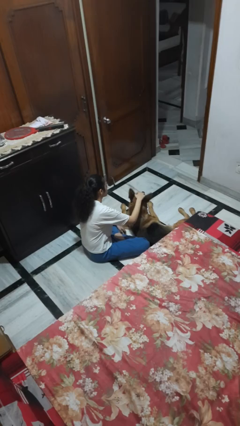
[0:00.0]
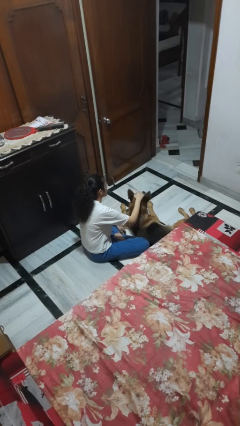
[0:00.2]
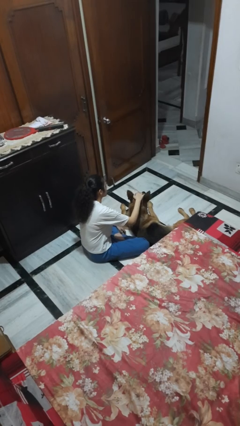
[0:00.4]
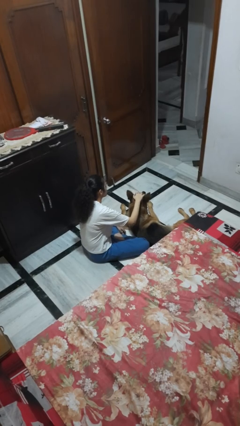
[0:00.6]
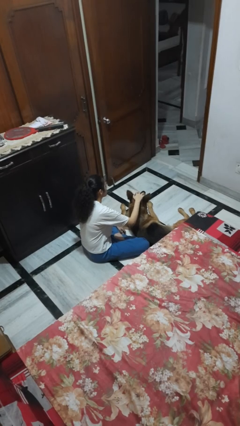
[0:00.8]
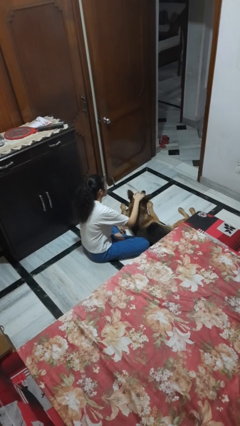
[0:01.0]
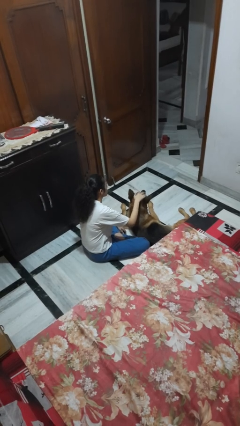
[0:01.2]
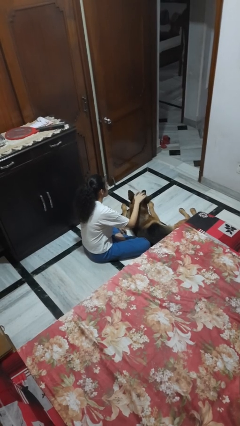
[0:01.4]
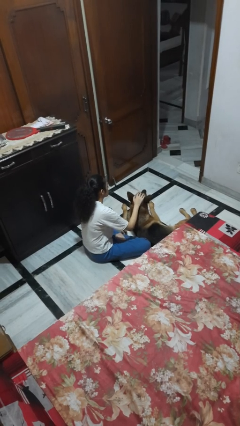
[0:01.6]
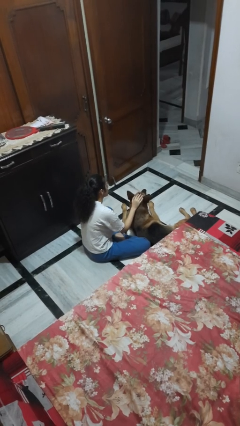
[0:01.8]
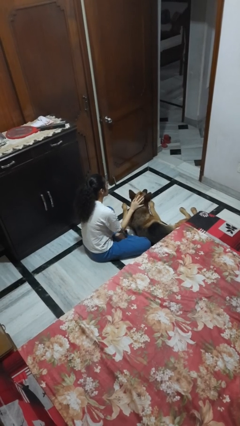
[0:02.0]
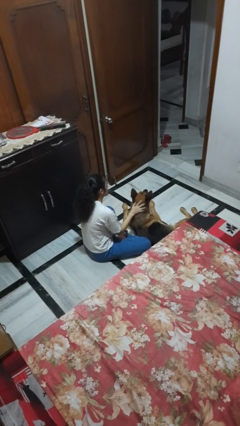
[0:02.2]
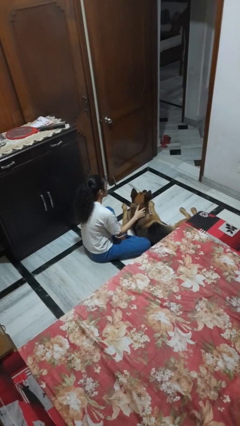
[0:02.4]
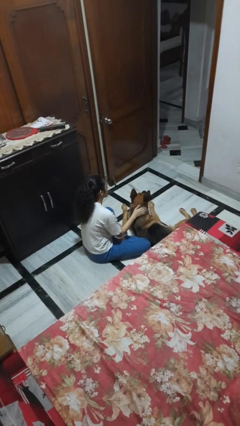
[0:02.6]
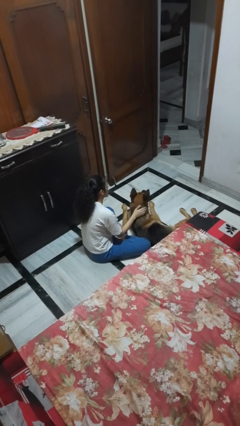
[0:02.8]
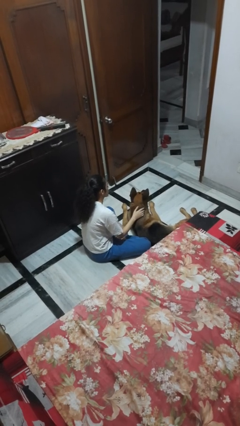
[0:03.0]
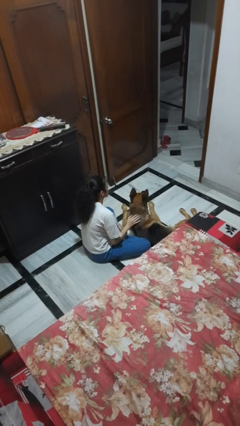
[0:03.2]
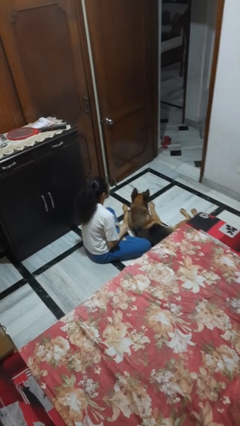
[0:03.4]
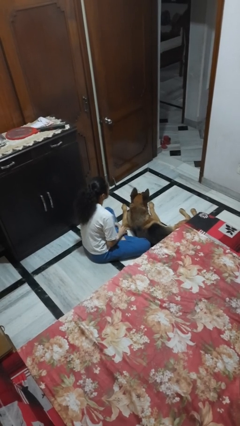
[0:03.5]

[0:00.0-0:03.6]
person pets dog

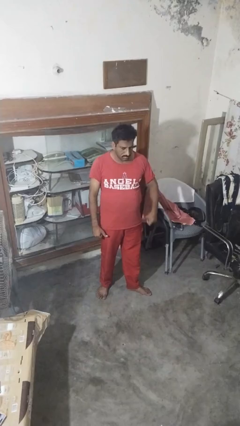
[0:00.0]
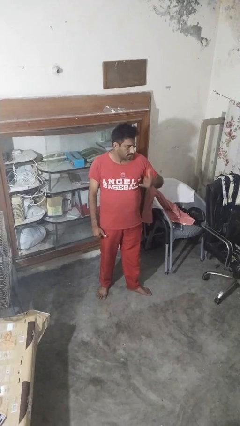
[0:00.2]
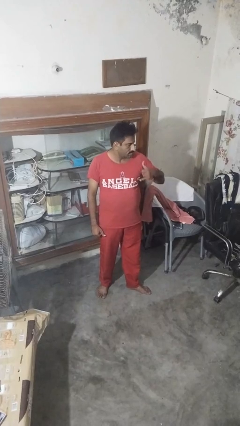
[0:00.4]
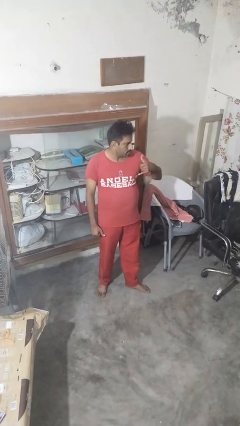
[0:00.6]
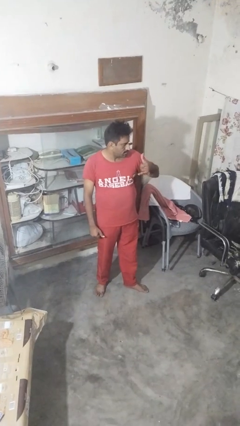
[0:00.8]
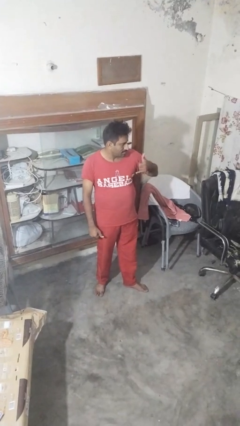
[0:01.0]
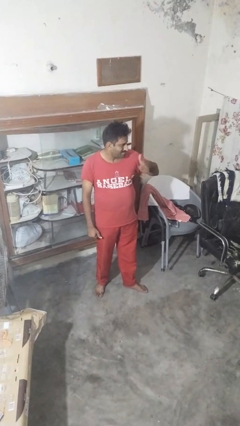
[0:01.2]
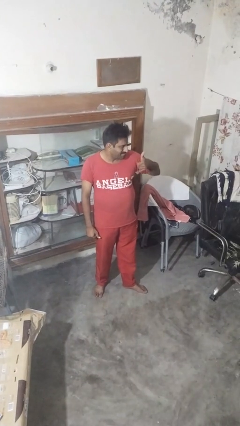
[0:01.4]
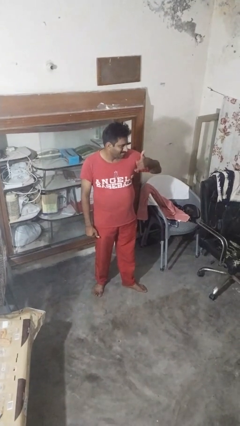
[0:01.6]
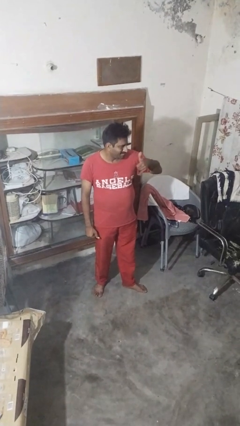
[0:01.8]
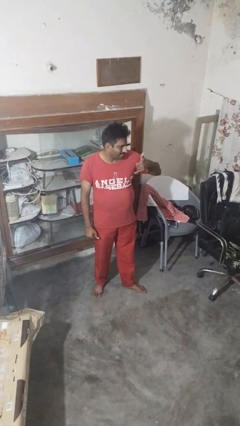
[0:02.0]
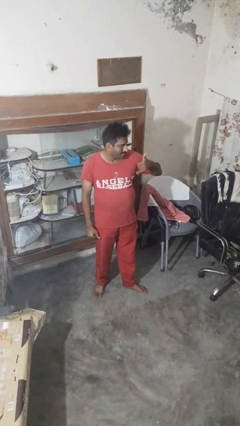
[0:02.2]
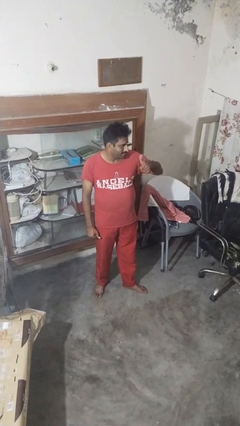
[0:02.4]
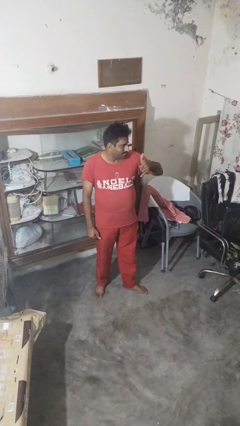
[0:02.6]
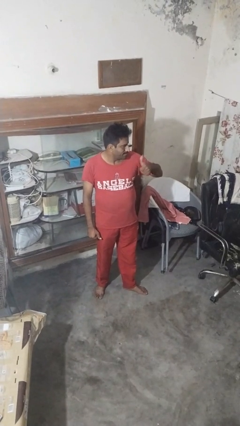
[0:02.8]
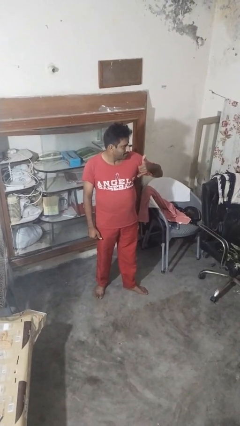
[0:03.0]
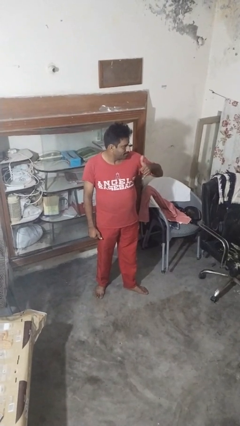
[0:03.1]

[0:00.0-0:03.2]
person gestures hang loose

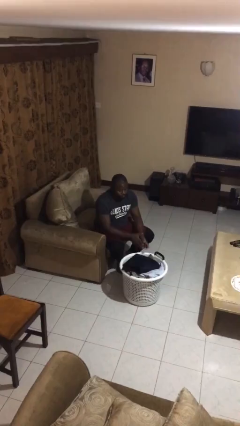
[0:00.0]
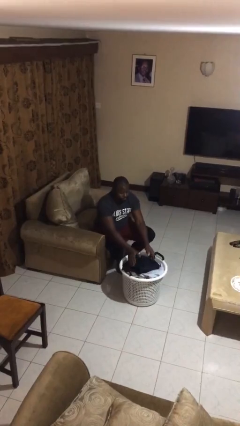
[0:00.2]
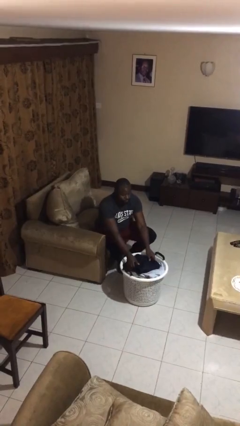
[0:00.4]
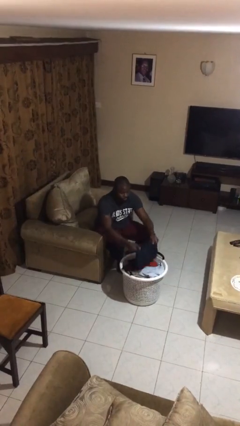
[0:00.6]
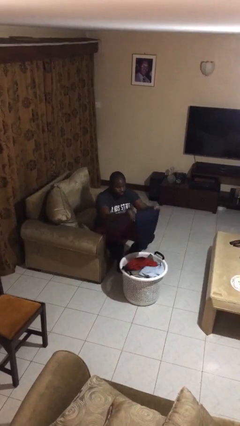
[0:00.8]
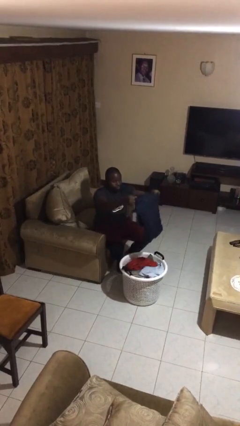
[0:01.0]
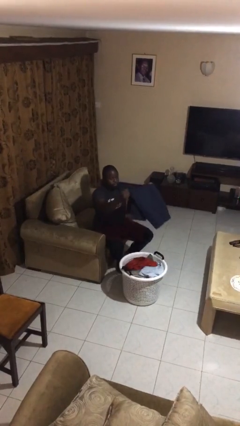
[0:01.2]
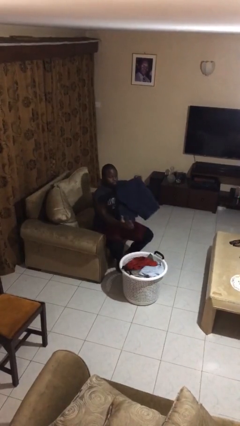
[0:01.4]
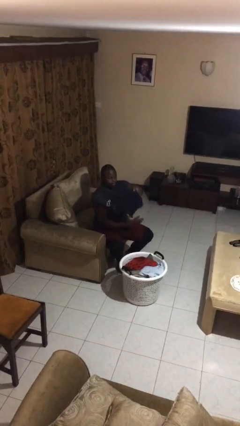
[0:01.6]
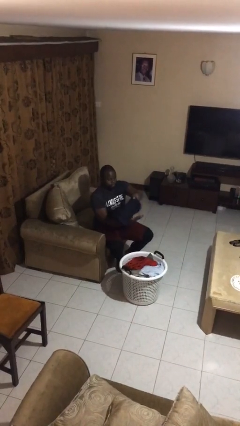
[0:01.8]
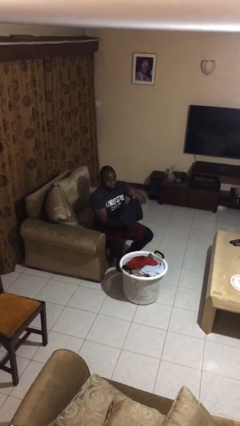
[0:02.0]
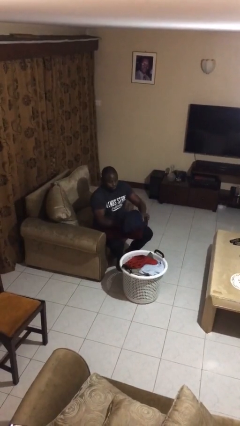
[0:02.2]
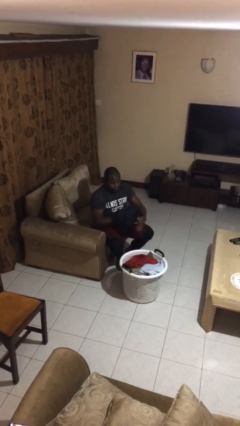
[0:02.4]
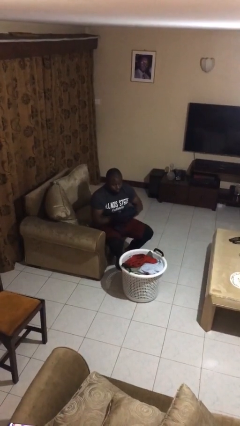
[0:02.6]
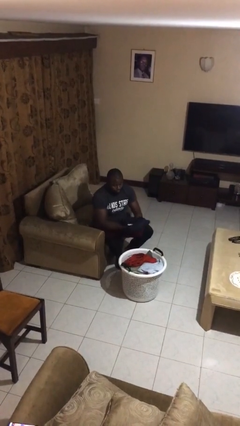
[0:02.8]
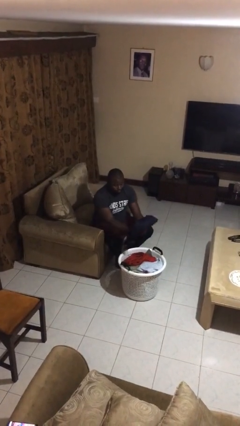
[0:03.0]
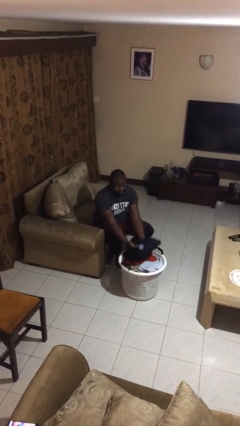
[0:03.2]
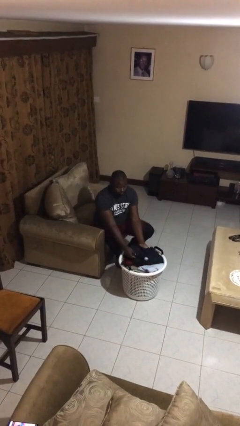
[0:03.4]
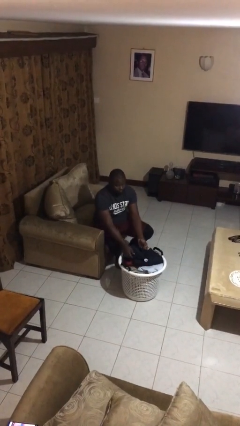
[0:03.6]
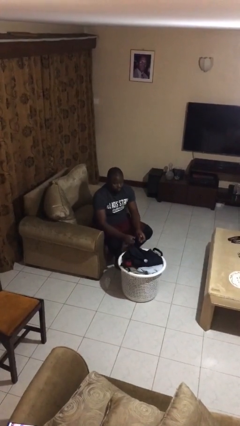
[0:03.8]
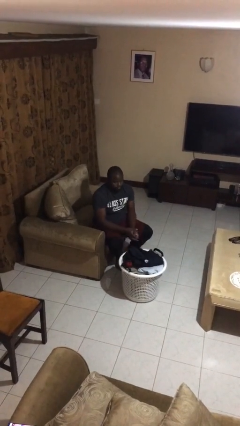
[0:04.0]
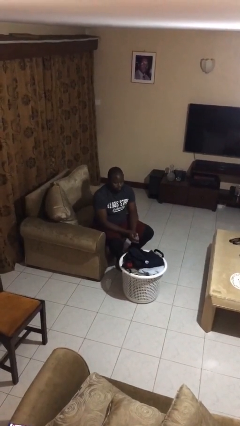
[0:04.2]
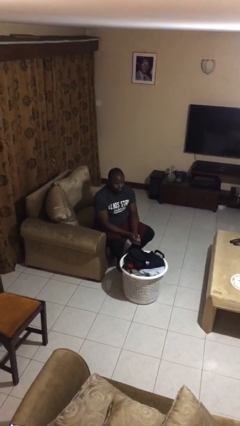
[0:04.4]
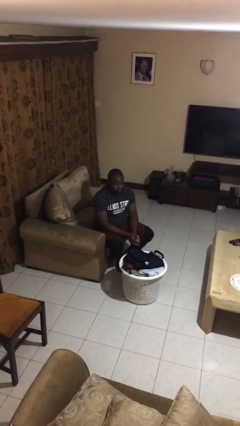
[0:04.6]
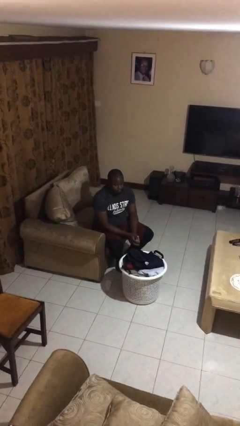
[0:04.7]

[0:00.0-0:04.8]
person folds pants

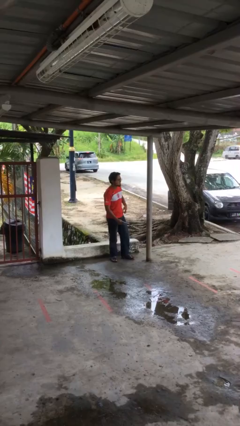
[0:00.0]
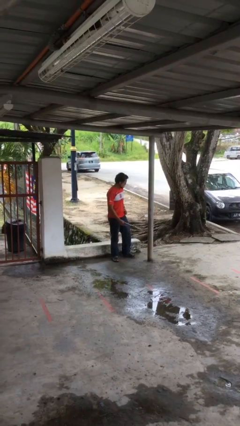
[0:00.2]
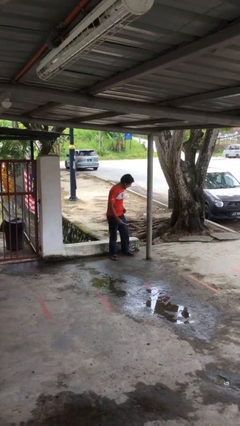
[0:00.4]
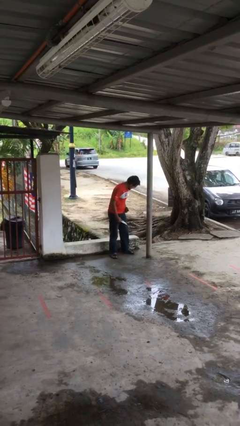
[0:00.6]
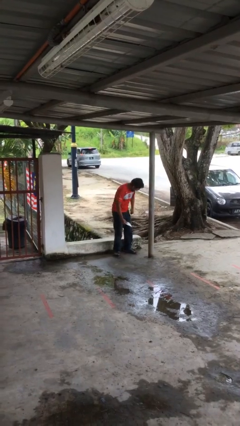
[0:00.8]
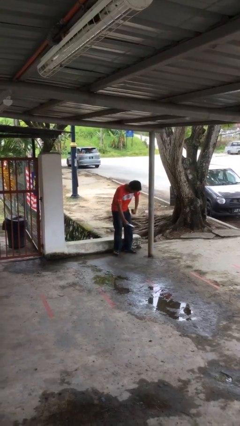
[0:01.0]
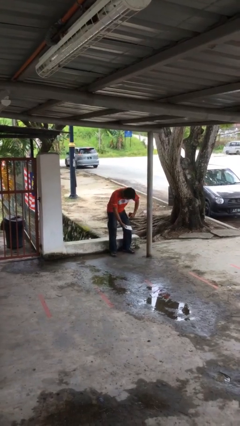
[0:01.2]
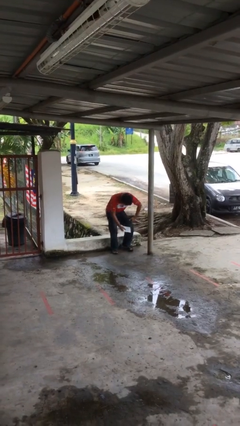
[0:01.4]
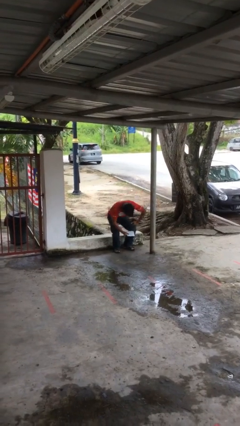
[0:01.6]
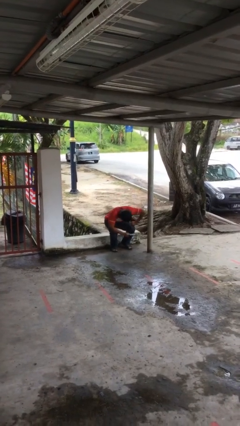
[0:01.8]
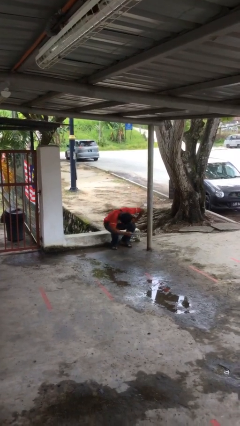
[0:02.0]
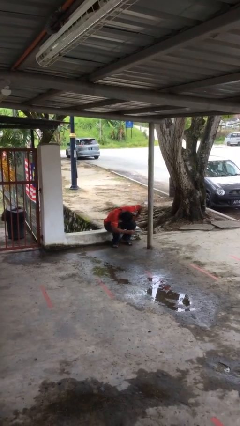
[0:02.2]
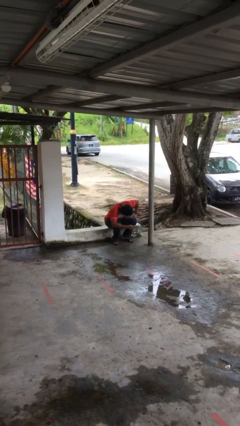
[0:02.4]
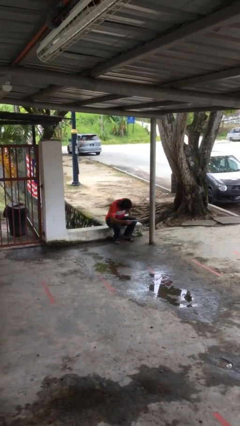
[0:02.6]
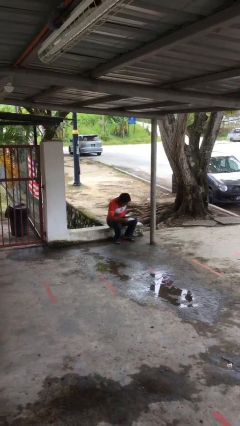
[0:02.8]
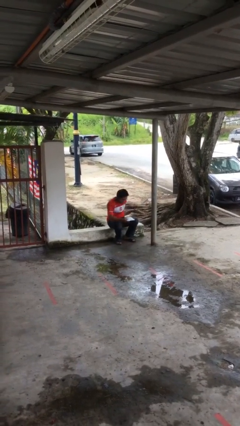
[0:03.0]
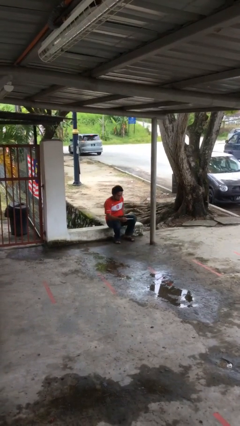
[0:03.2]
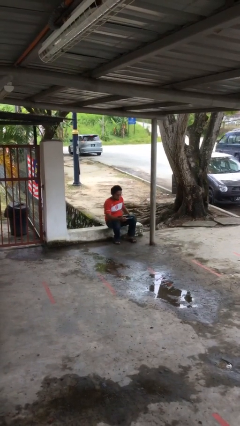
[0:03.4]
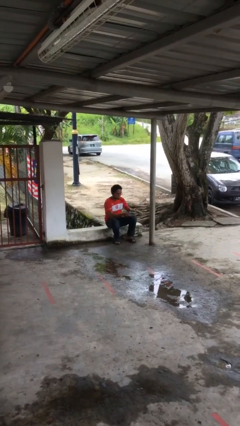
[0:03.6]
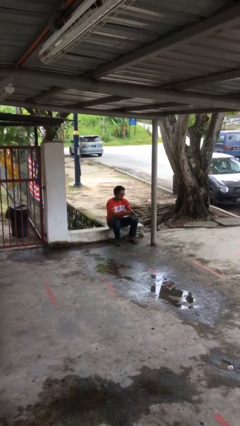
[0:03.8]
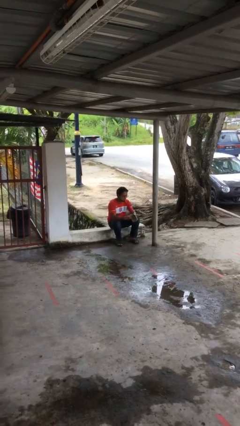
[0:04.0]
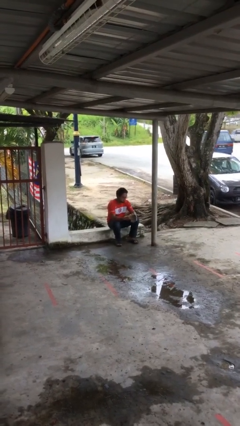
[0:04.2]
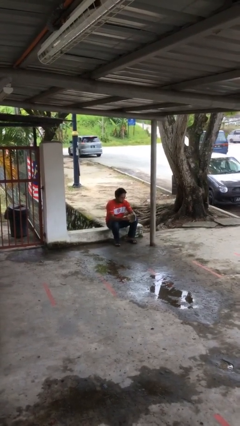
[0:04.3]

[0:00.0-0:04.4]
person sits down

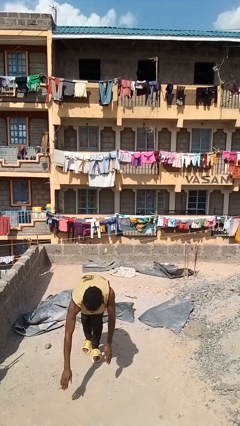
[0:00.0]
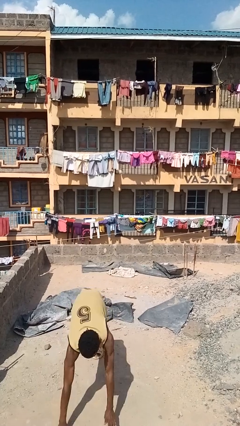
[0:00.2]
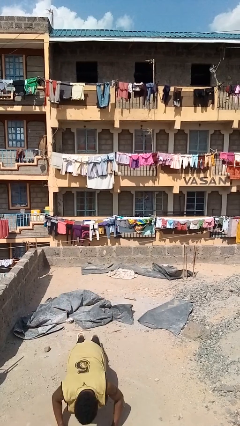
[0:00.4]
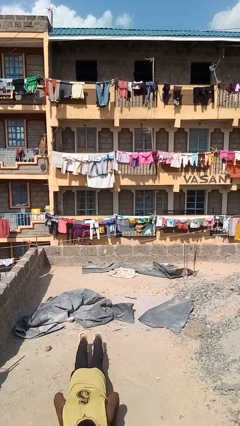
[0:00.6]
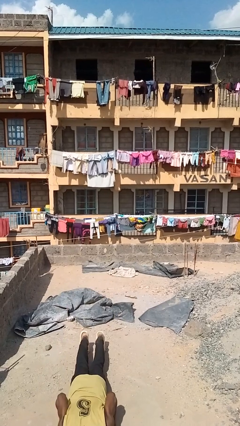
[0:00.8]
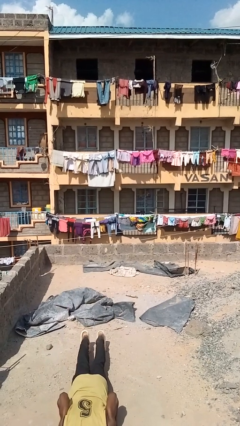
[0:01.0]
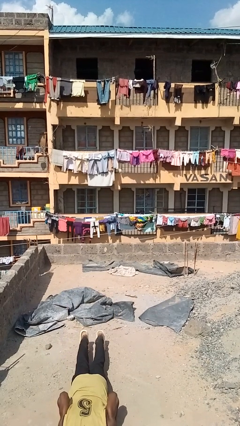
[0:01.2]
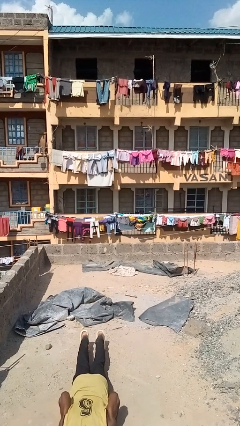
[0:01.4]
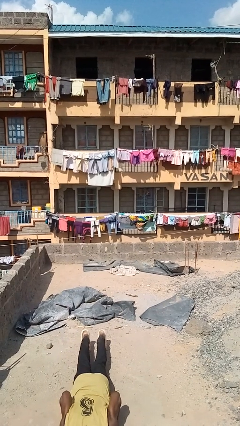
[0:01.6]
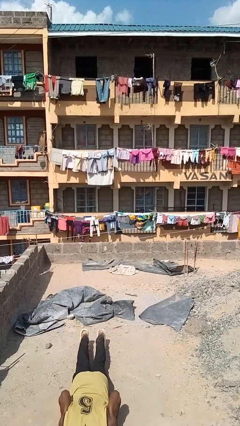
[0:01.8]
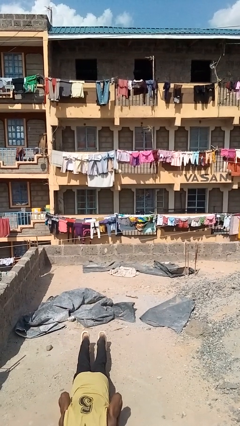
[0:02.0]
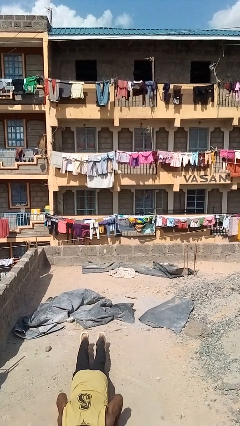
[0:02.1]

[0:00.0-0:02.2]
person falls while standing
